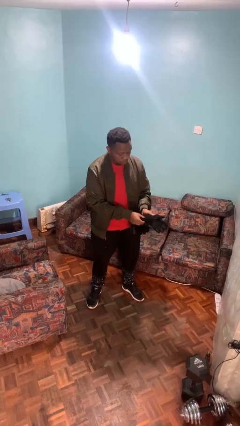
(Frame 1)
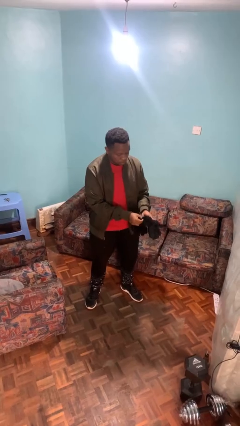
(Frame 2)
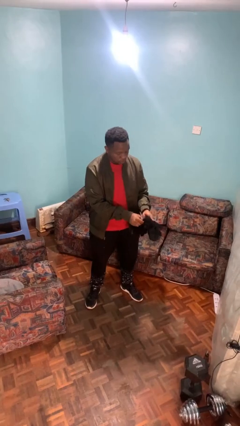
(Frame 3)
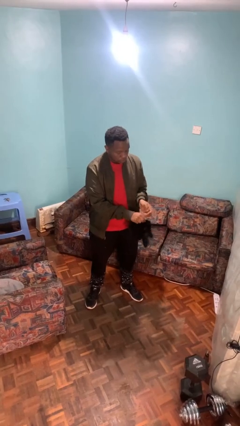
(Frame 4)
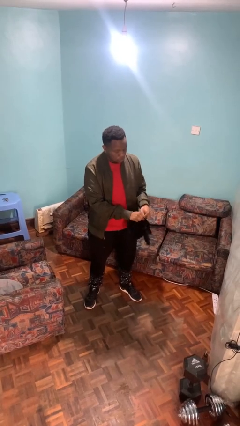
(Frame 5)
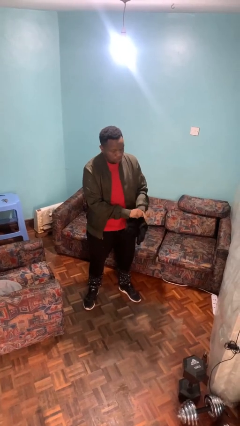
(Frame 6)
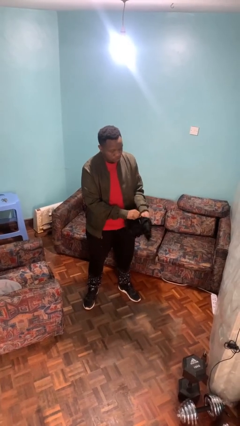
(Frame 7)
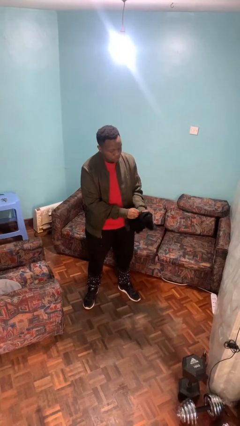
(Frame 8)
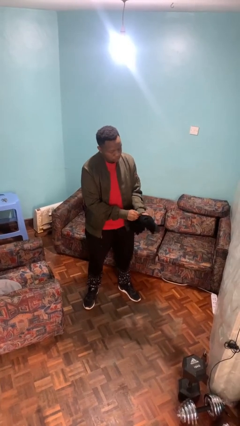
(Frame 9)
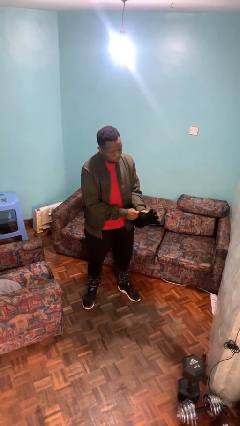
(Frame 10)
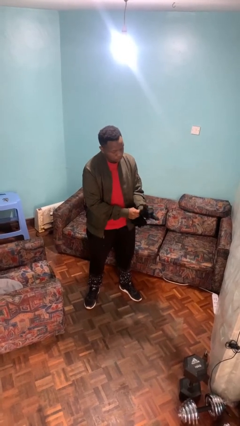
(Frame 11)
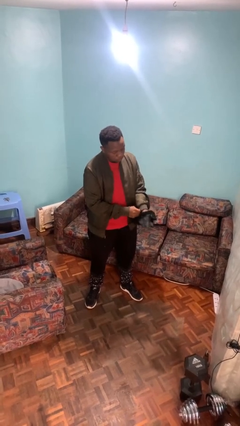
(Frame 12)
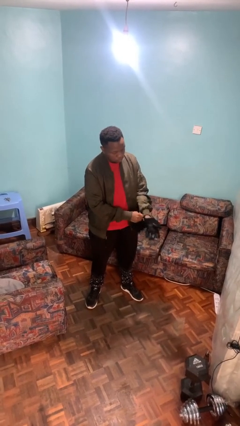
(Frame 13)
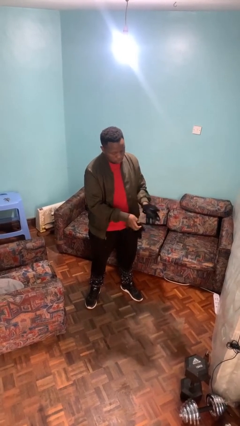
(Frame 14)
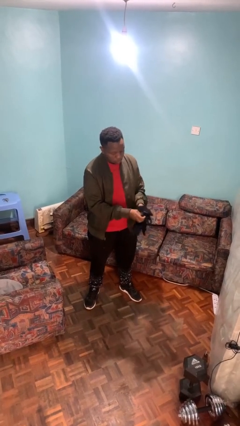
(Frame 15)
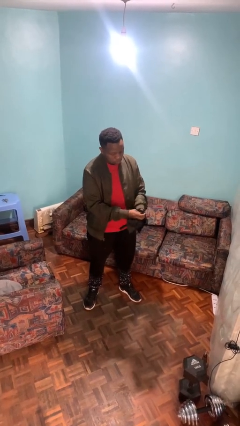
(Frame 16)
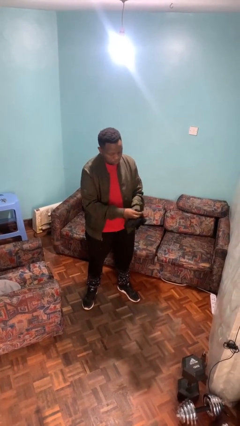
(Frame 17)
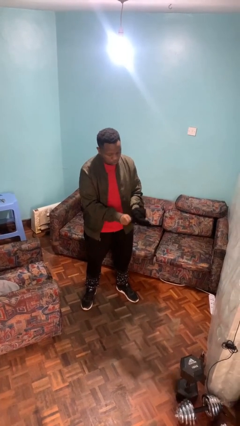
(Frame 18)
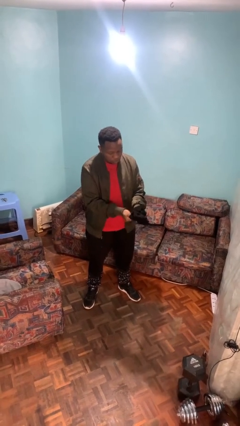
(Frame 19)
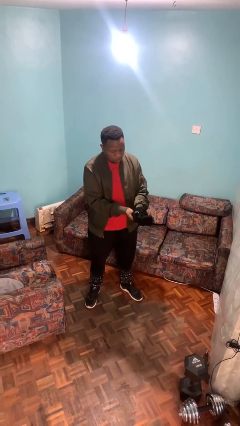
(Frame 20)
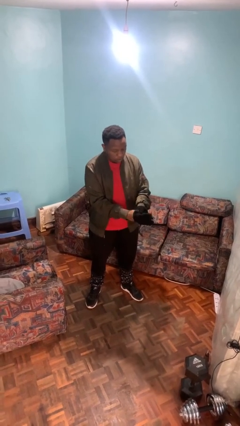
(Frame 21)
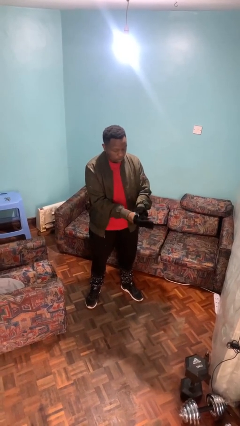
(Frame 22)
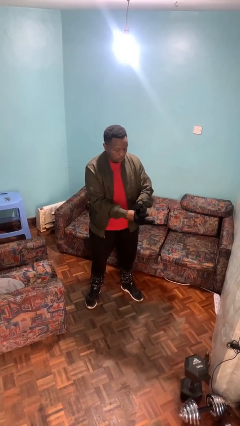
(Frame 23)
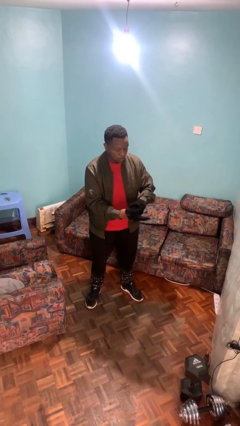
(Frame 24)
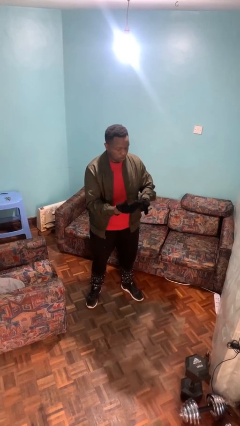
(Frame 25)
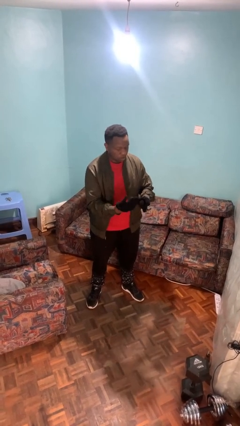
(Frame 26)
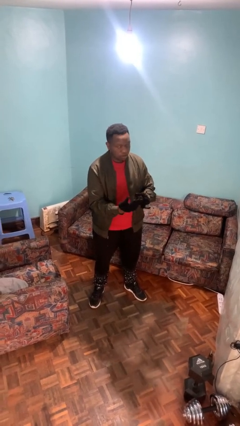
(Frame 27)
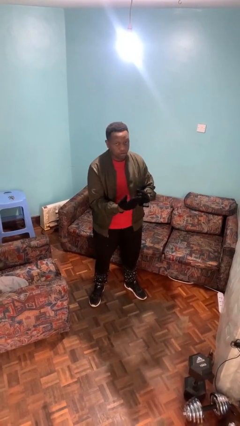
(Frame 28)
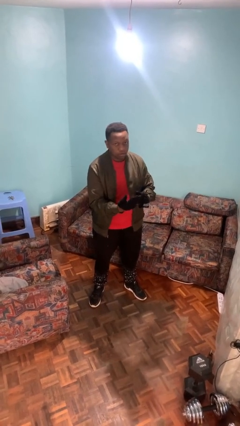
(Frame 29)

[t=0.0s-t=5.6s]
person puts on gloves

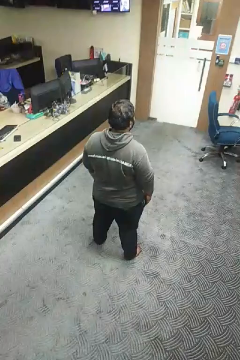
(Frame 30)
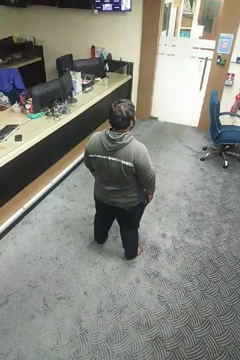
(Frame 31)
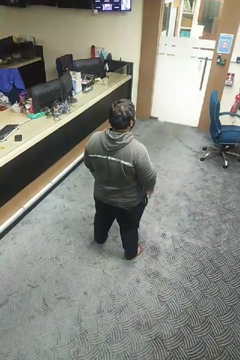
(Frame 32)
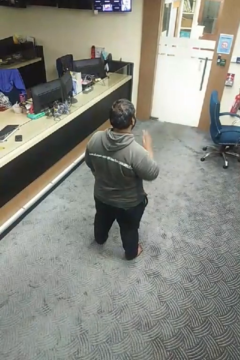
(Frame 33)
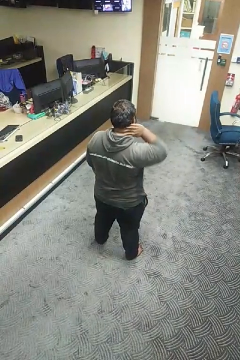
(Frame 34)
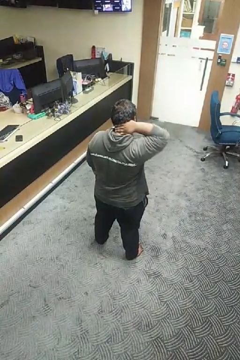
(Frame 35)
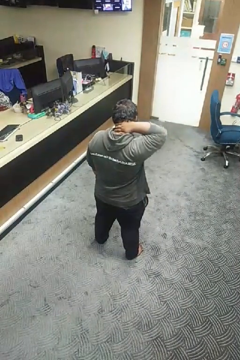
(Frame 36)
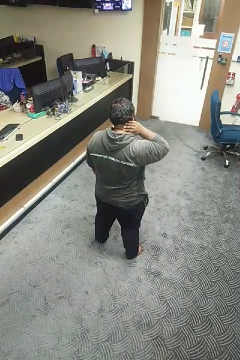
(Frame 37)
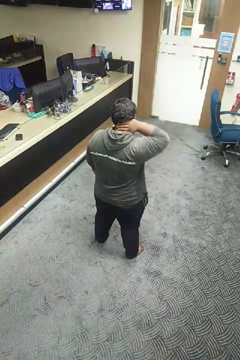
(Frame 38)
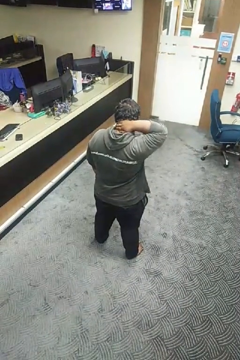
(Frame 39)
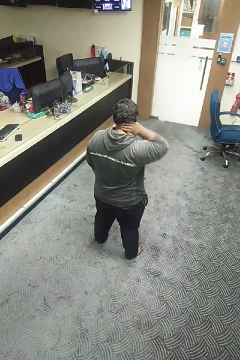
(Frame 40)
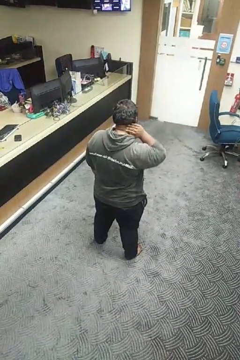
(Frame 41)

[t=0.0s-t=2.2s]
person rubs neck

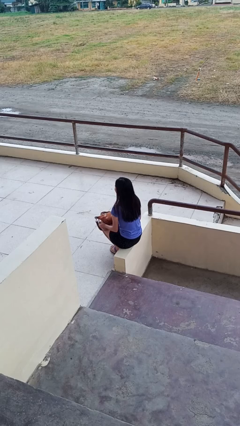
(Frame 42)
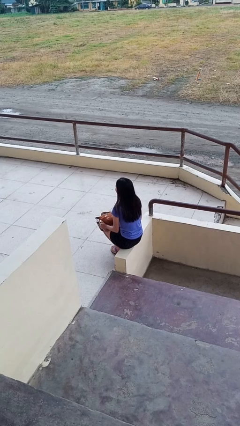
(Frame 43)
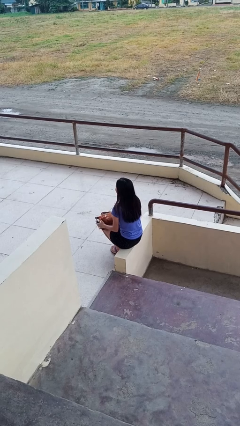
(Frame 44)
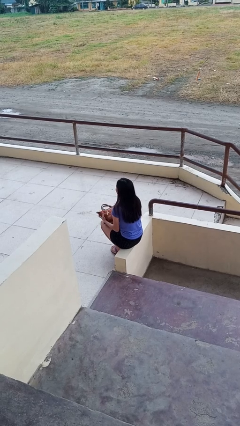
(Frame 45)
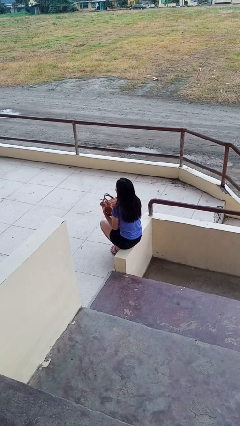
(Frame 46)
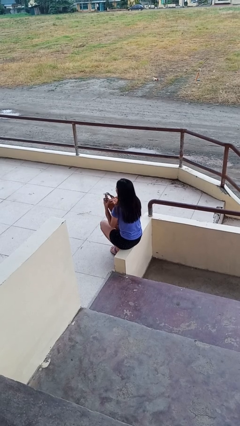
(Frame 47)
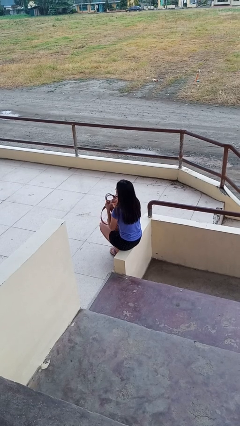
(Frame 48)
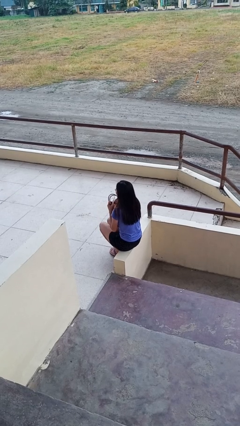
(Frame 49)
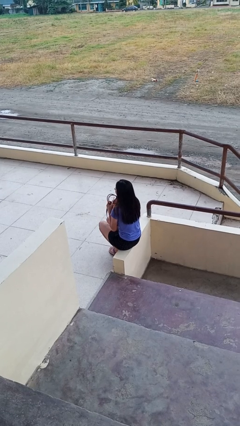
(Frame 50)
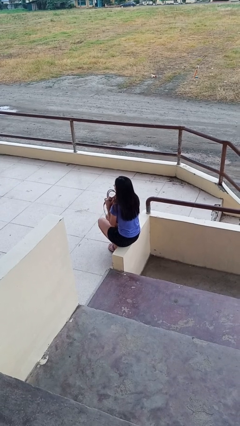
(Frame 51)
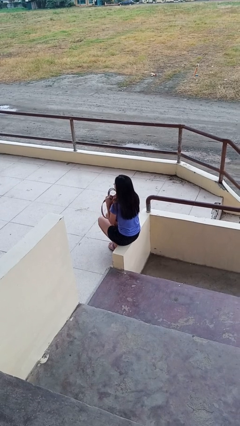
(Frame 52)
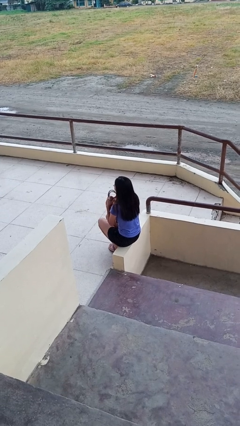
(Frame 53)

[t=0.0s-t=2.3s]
person squeezes object

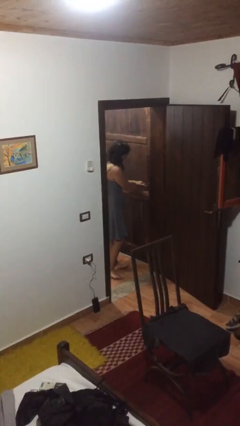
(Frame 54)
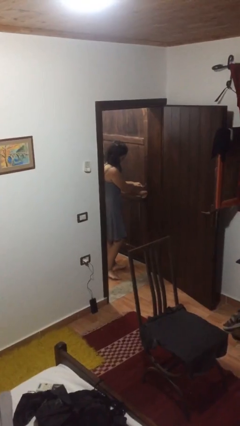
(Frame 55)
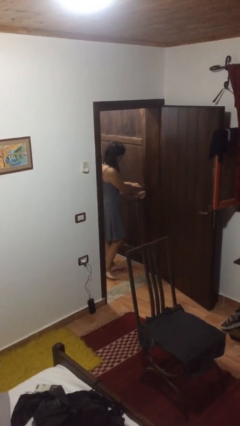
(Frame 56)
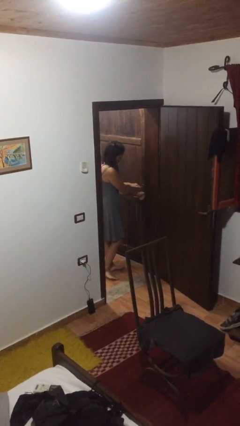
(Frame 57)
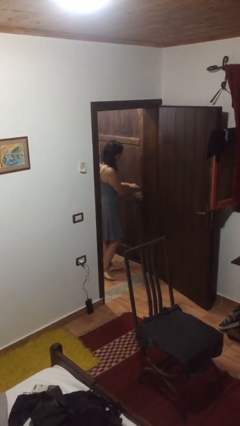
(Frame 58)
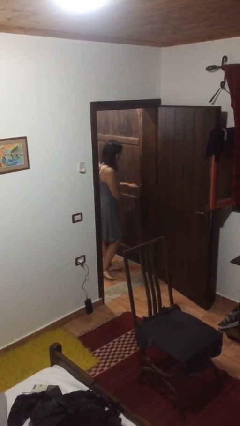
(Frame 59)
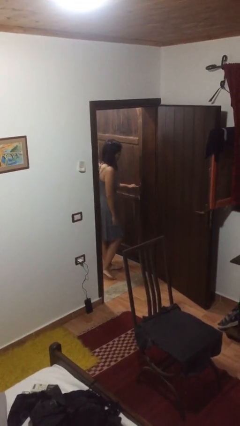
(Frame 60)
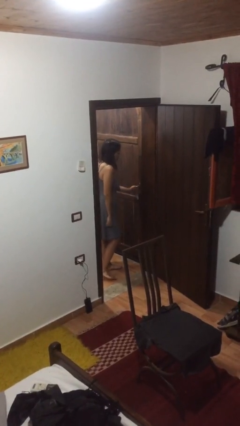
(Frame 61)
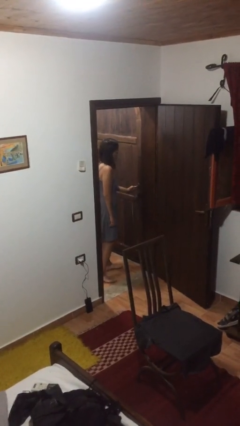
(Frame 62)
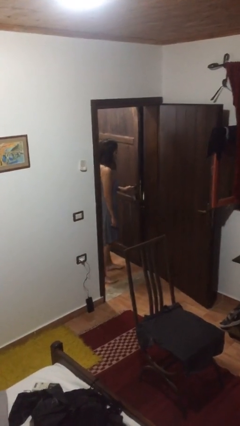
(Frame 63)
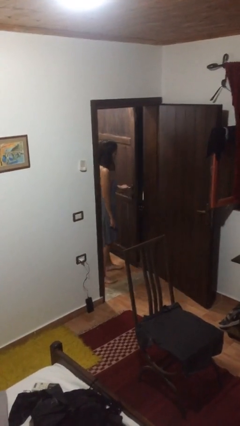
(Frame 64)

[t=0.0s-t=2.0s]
person unlocks door with keys

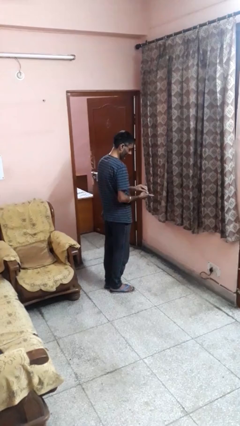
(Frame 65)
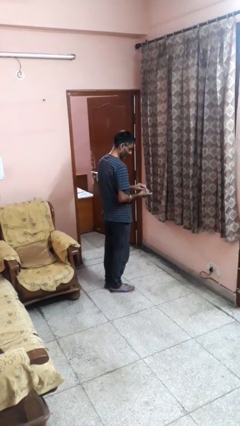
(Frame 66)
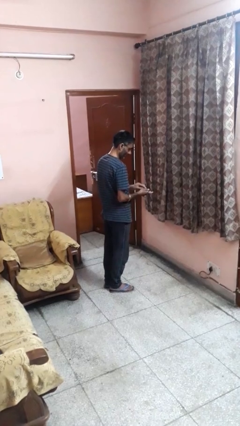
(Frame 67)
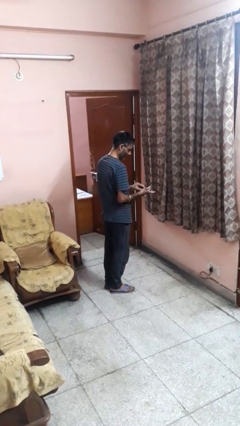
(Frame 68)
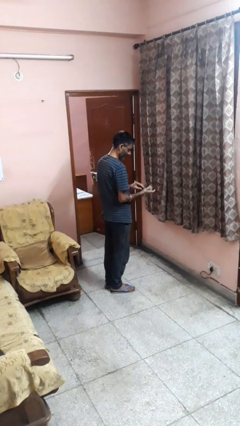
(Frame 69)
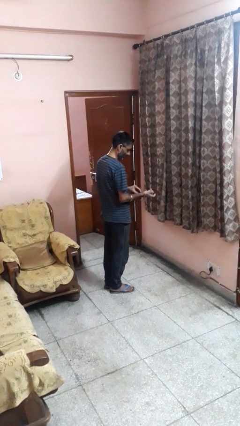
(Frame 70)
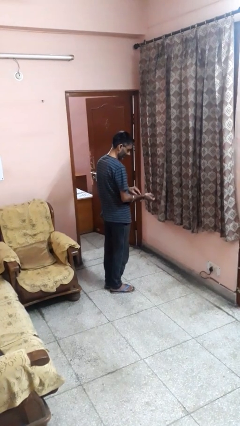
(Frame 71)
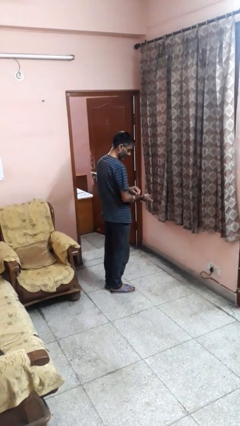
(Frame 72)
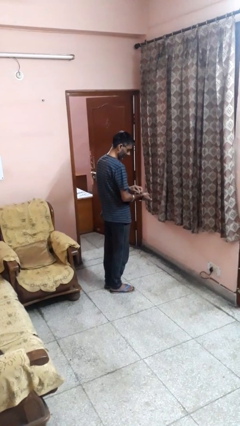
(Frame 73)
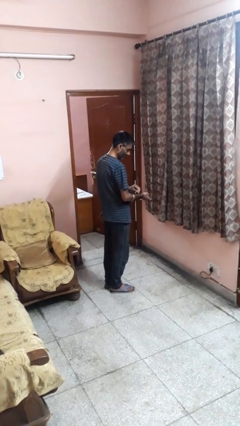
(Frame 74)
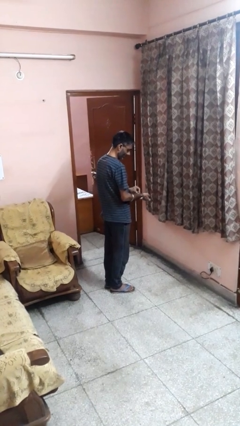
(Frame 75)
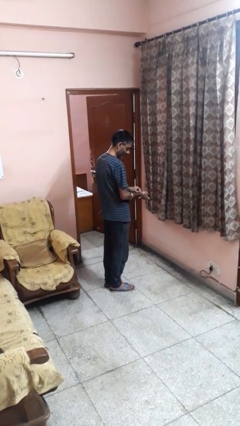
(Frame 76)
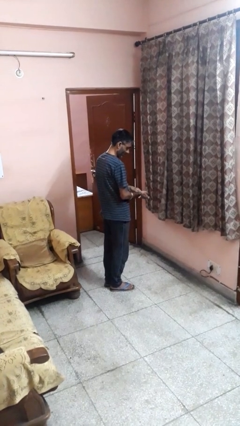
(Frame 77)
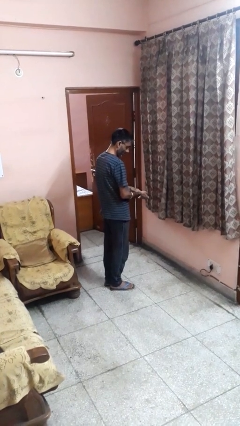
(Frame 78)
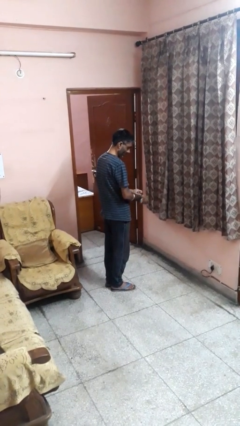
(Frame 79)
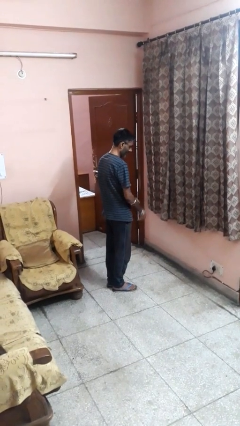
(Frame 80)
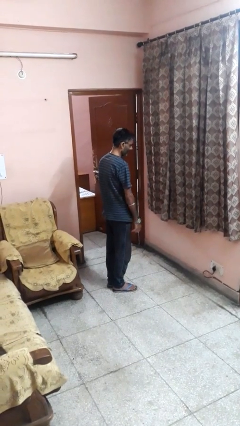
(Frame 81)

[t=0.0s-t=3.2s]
person puts on wristwatch

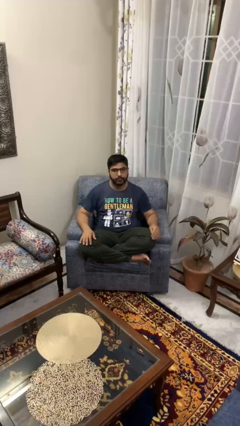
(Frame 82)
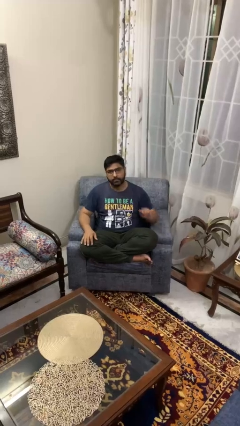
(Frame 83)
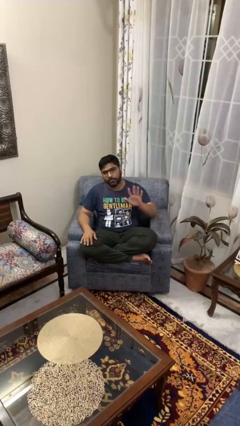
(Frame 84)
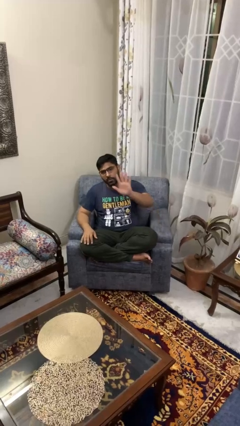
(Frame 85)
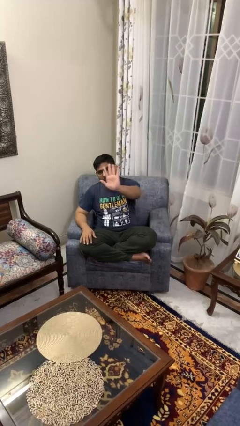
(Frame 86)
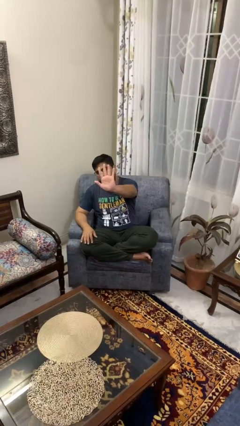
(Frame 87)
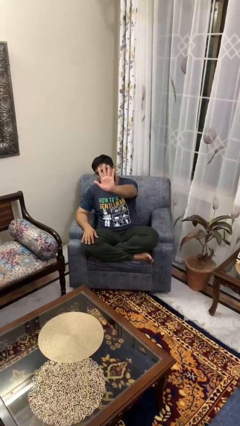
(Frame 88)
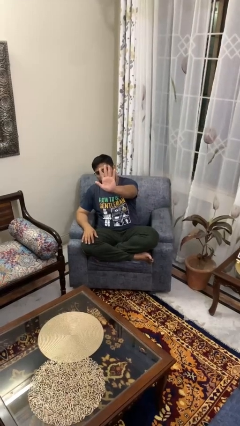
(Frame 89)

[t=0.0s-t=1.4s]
person gestures number five

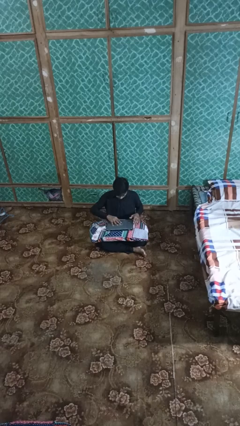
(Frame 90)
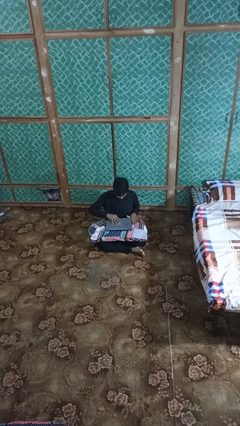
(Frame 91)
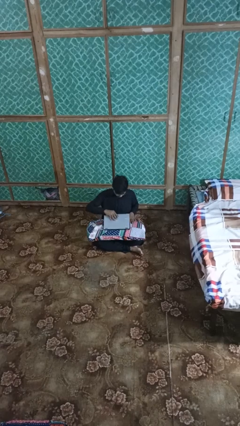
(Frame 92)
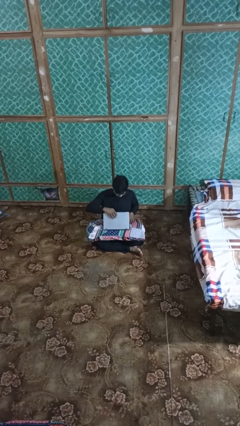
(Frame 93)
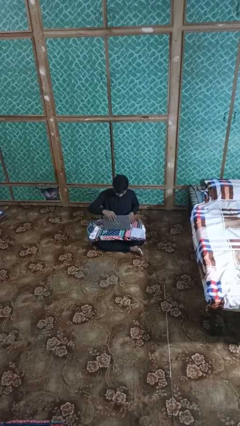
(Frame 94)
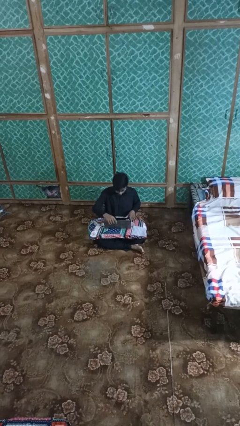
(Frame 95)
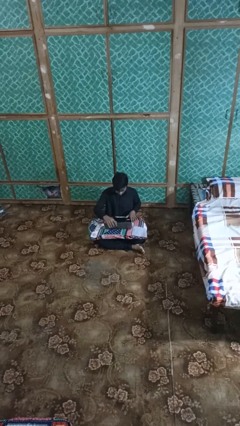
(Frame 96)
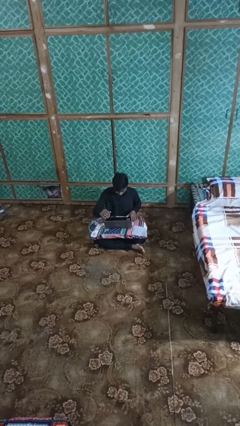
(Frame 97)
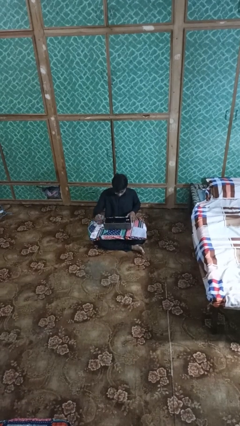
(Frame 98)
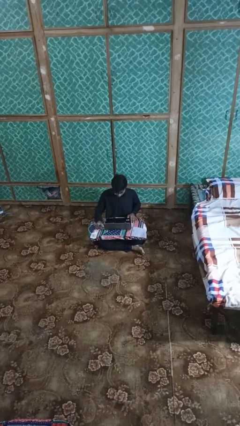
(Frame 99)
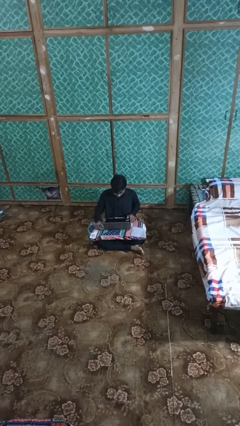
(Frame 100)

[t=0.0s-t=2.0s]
person opens laptop
